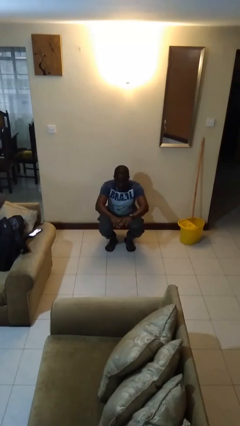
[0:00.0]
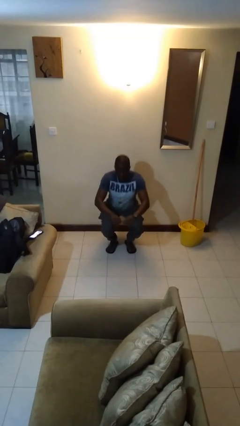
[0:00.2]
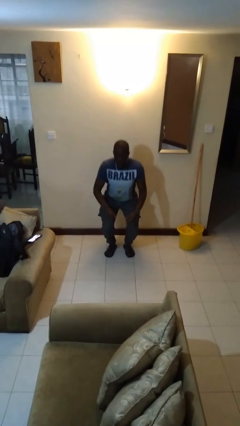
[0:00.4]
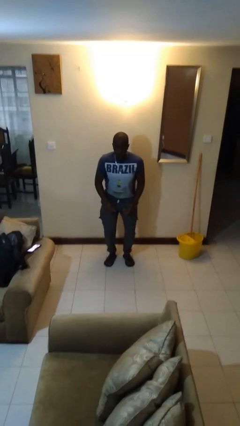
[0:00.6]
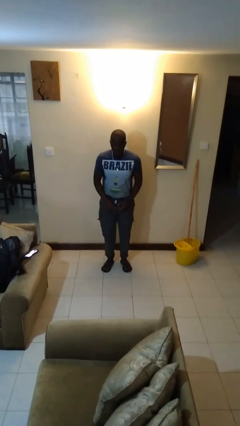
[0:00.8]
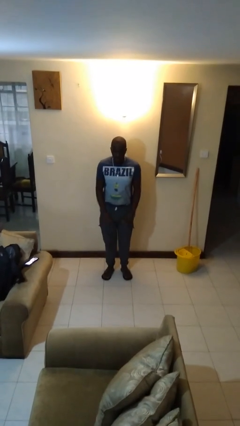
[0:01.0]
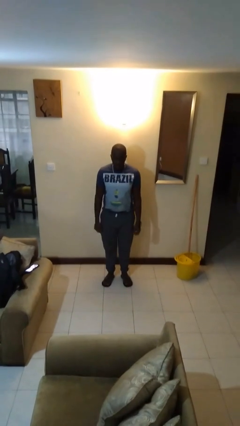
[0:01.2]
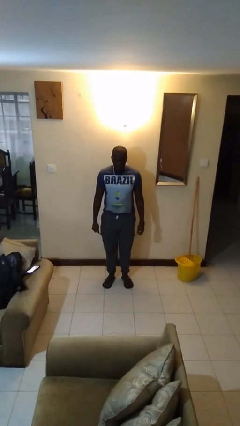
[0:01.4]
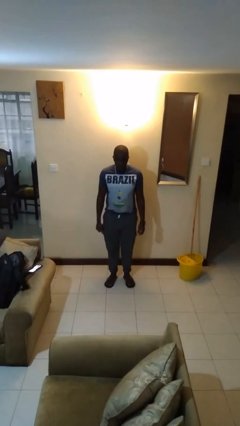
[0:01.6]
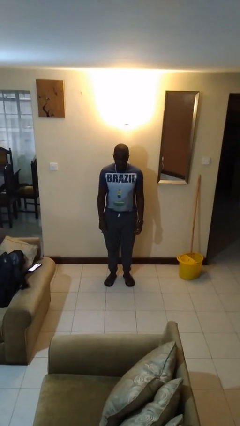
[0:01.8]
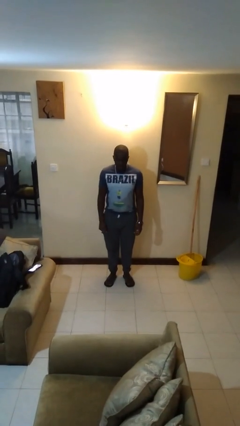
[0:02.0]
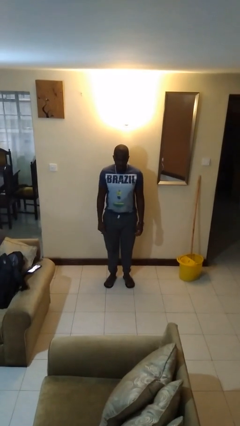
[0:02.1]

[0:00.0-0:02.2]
person stands up

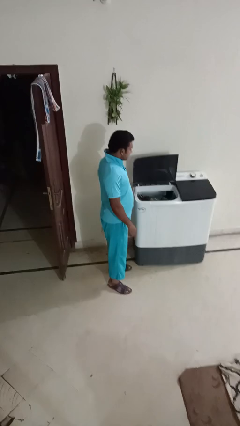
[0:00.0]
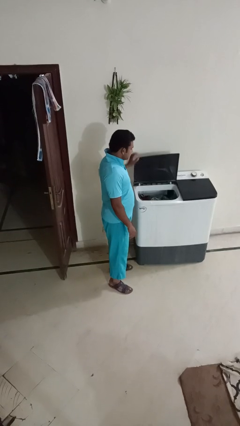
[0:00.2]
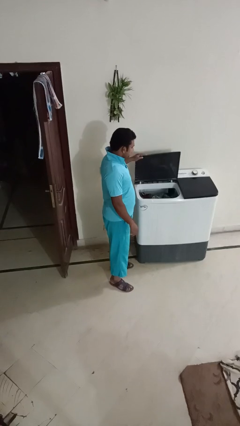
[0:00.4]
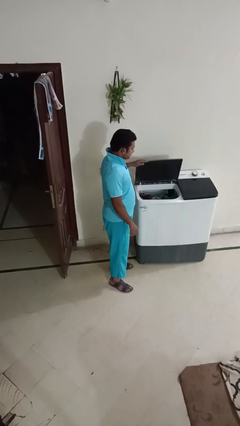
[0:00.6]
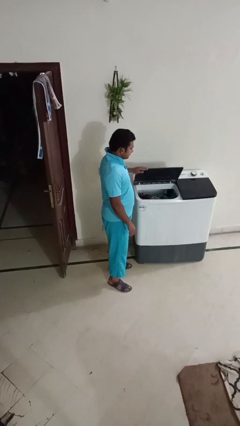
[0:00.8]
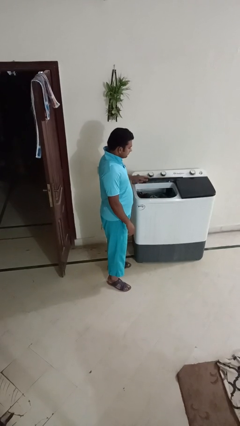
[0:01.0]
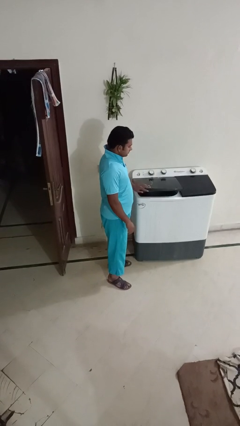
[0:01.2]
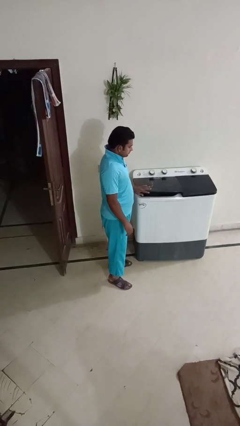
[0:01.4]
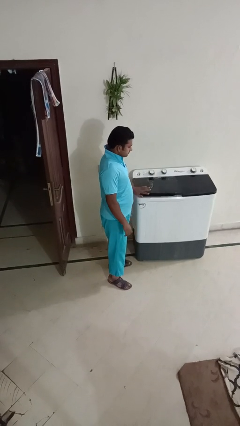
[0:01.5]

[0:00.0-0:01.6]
person closes clothes washer

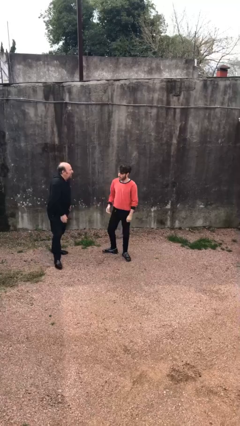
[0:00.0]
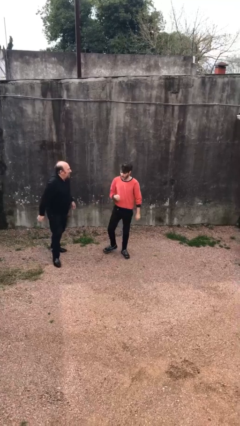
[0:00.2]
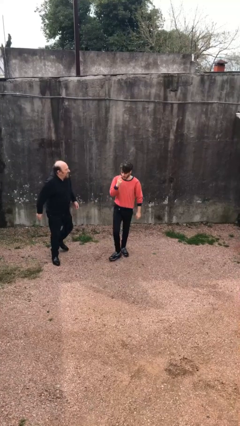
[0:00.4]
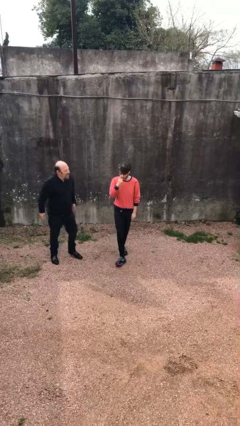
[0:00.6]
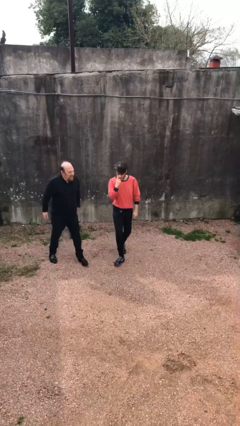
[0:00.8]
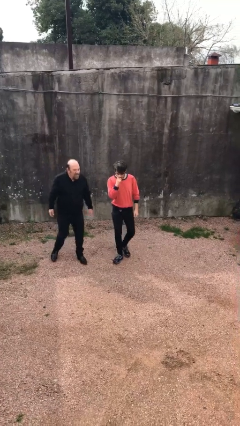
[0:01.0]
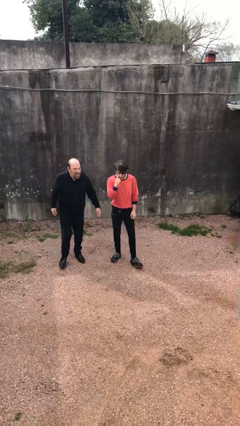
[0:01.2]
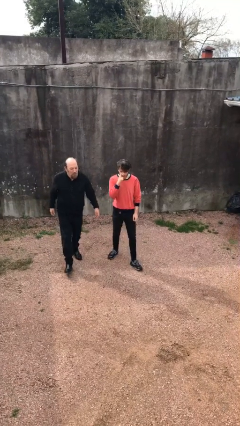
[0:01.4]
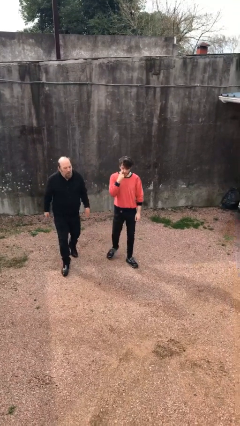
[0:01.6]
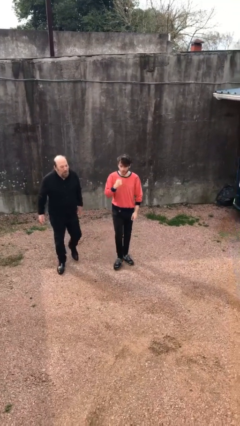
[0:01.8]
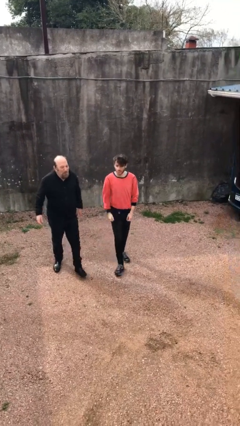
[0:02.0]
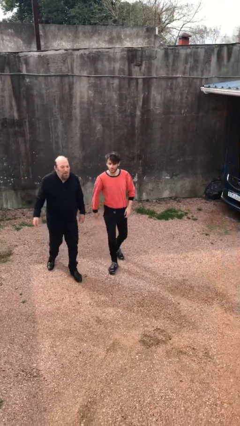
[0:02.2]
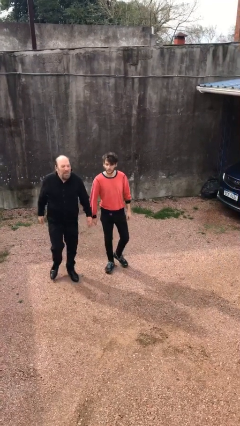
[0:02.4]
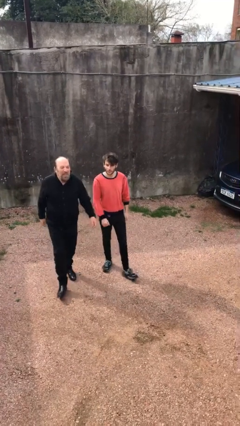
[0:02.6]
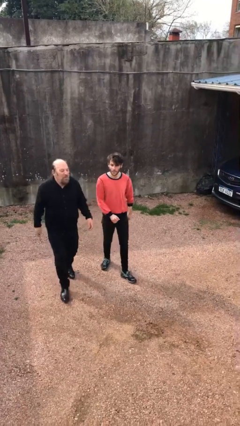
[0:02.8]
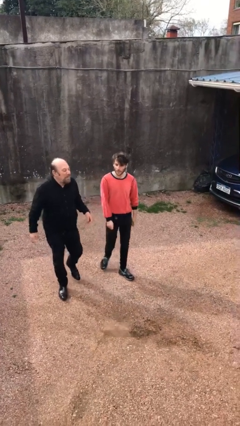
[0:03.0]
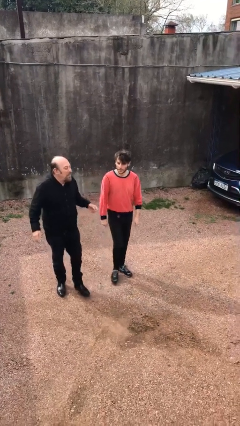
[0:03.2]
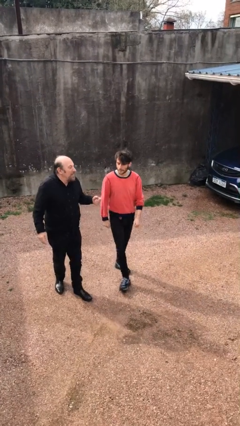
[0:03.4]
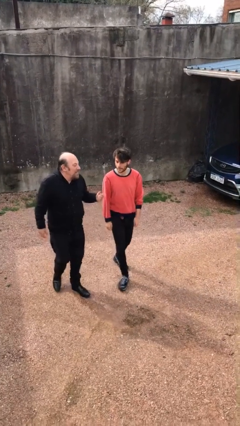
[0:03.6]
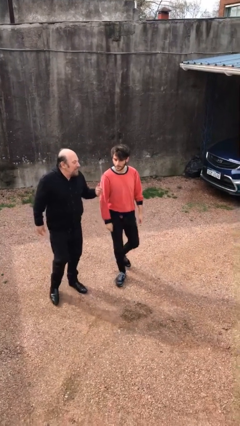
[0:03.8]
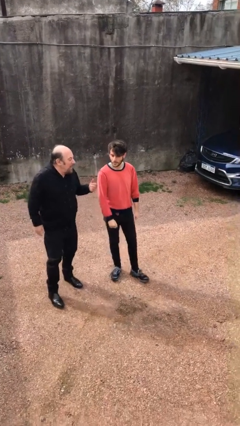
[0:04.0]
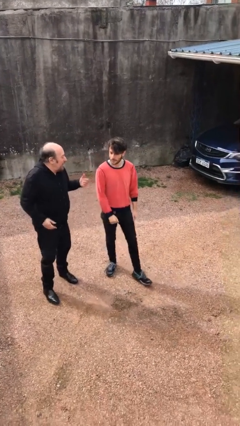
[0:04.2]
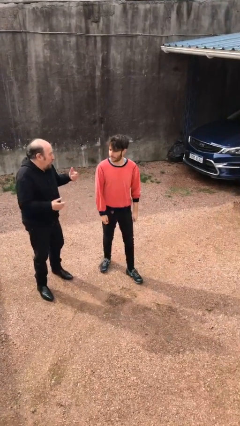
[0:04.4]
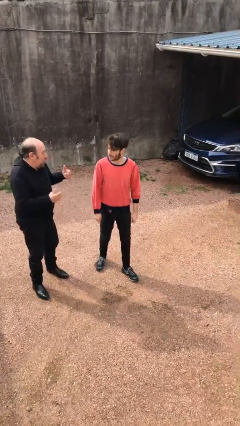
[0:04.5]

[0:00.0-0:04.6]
person talks to person

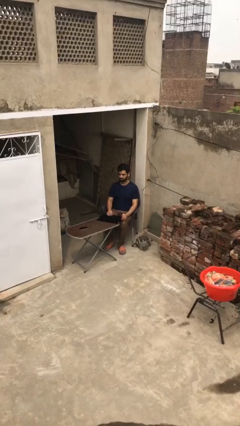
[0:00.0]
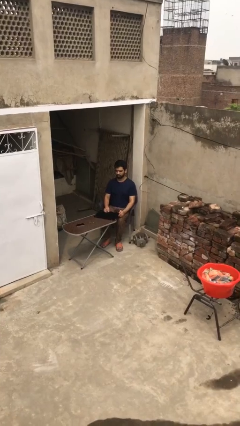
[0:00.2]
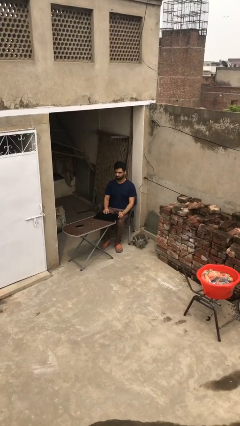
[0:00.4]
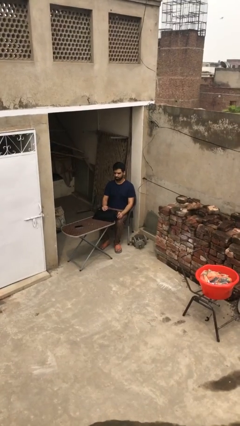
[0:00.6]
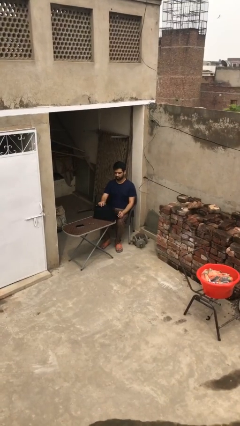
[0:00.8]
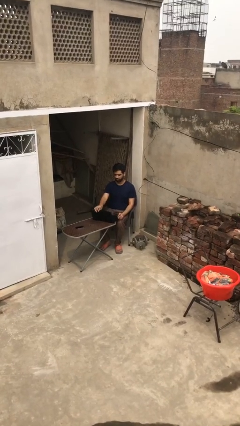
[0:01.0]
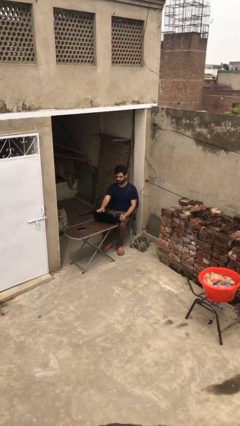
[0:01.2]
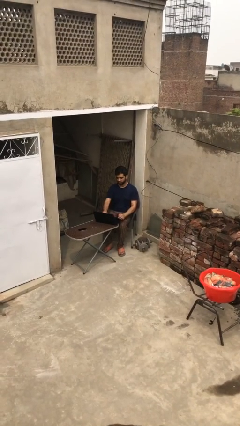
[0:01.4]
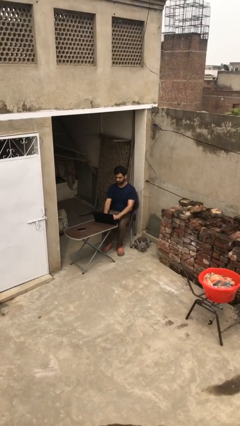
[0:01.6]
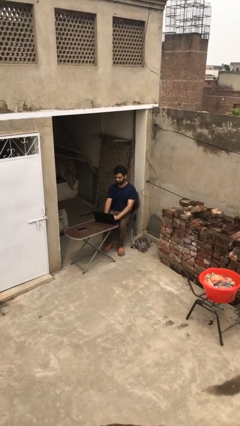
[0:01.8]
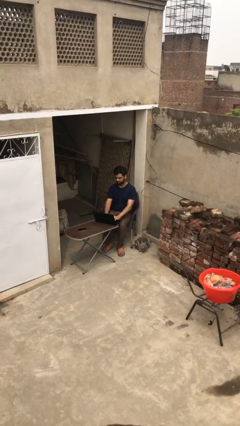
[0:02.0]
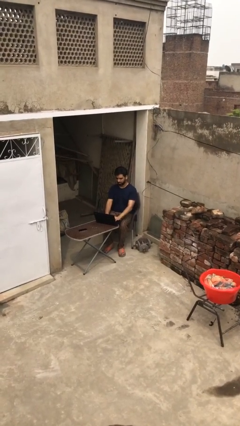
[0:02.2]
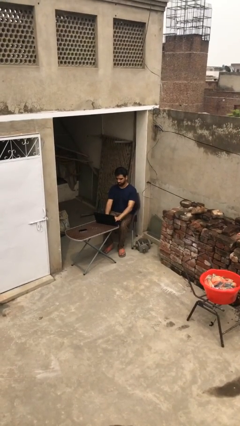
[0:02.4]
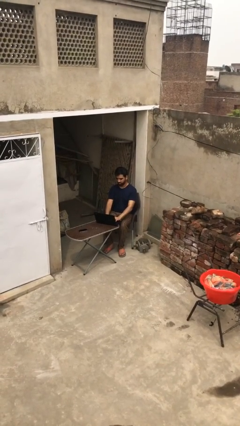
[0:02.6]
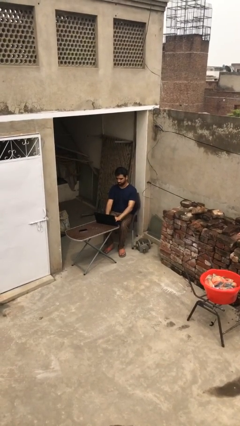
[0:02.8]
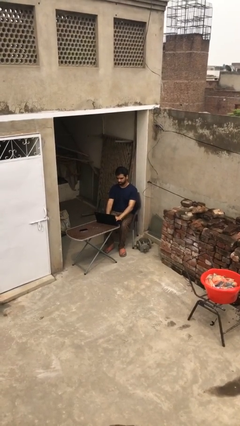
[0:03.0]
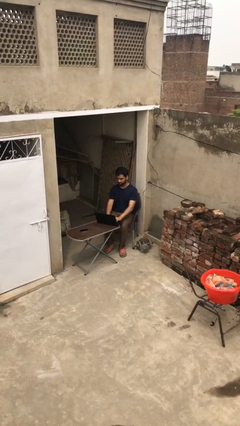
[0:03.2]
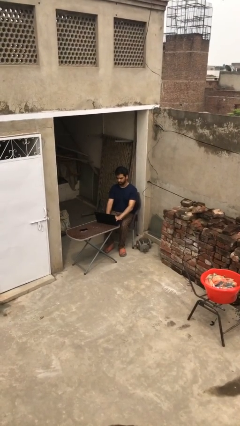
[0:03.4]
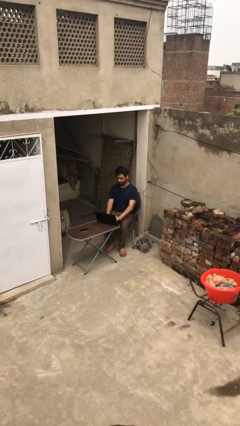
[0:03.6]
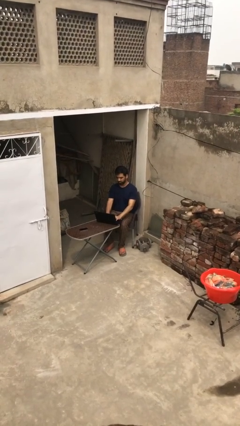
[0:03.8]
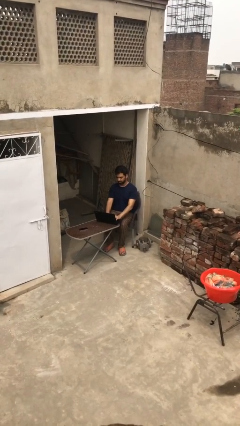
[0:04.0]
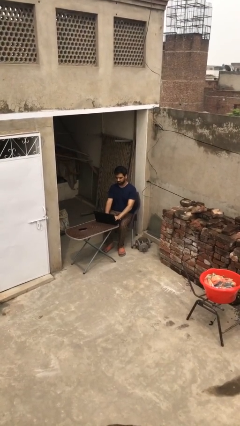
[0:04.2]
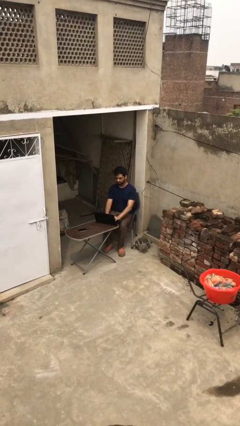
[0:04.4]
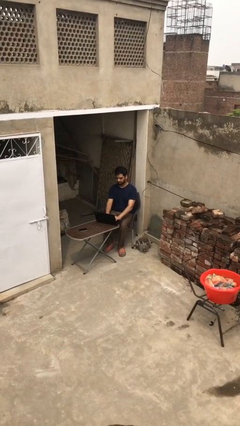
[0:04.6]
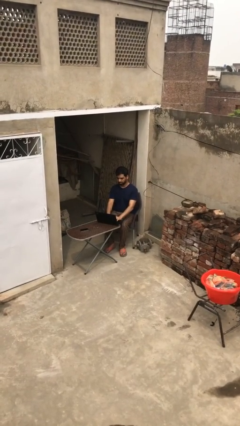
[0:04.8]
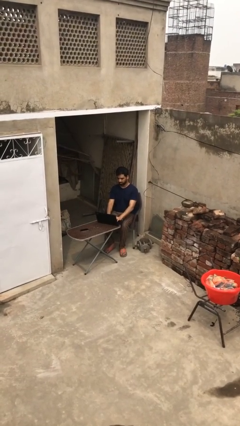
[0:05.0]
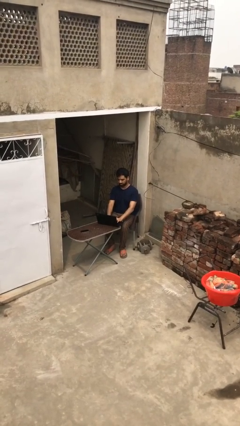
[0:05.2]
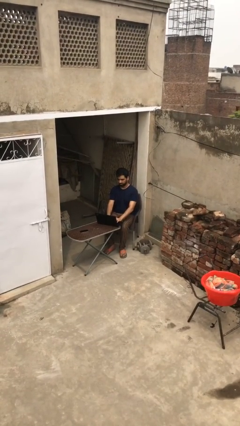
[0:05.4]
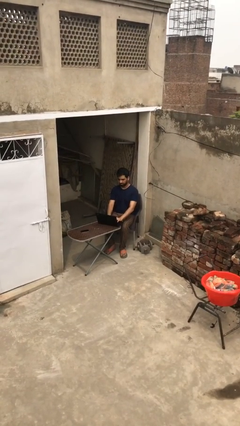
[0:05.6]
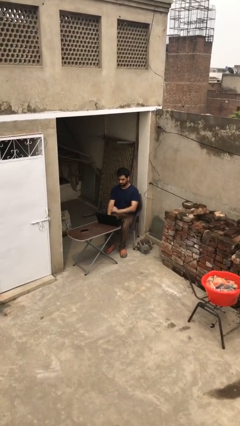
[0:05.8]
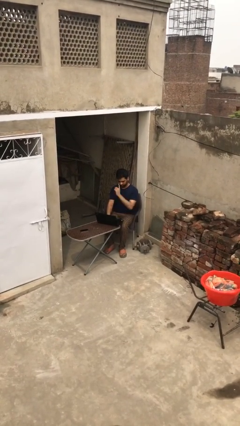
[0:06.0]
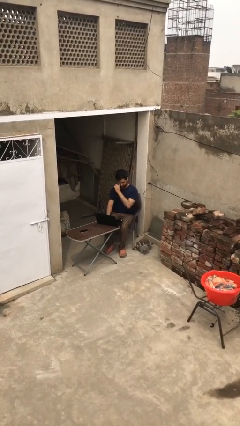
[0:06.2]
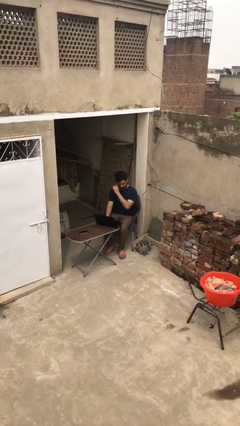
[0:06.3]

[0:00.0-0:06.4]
person interacts with laptop

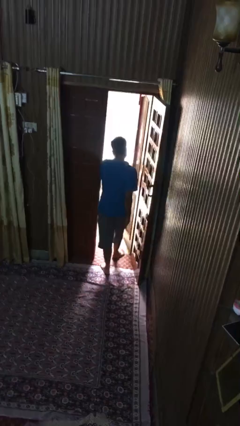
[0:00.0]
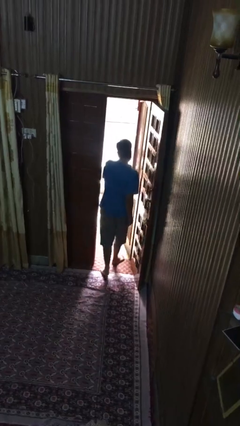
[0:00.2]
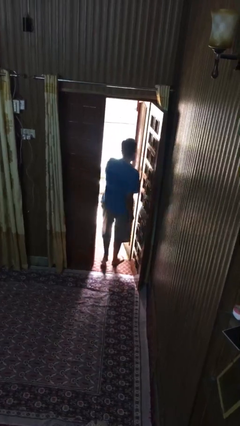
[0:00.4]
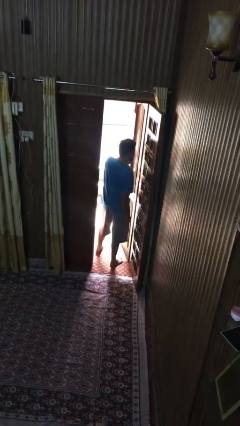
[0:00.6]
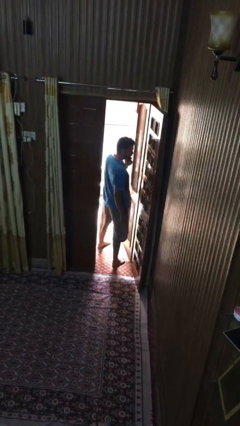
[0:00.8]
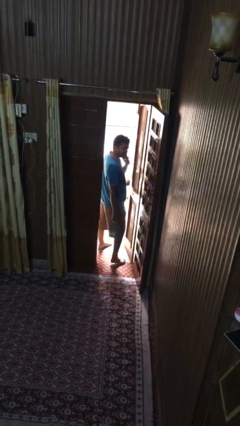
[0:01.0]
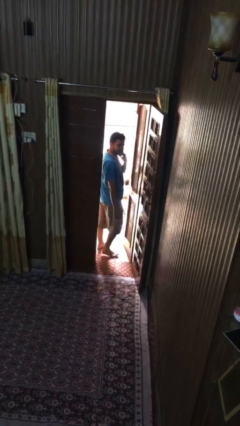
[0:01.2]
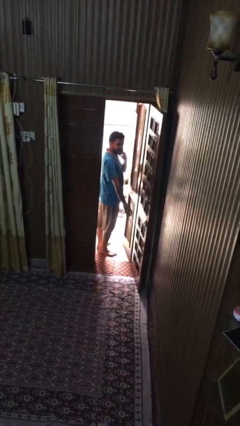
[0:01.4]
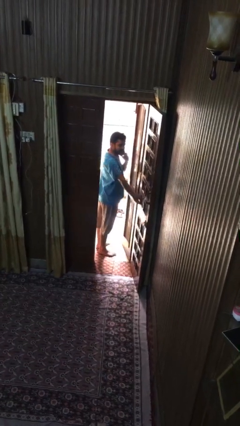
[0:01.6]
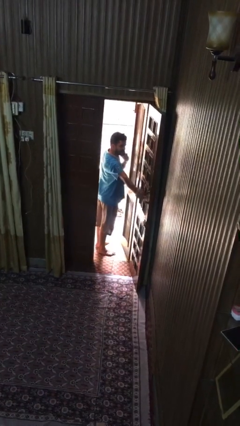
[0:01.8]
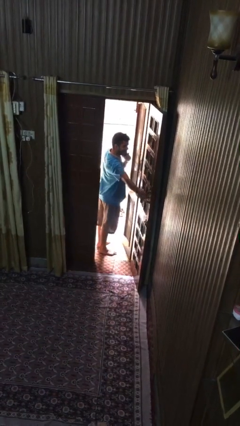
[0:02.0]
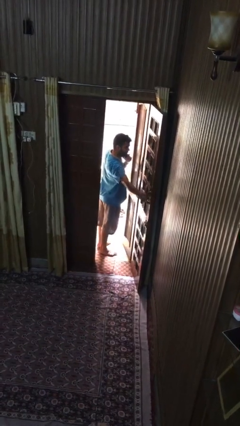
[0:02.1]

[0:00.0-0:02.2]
person exits scene through structure

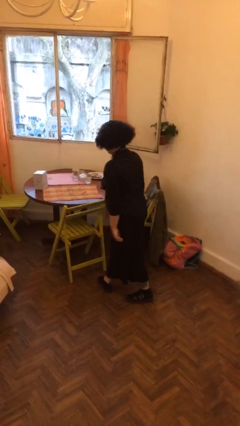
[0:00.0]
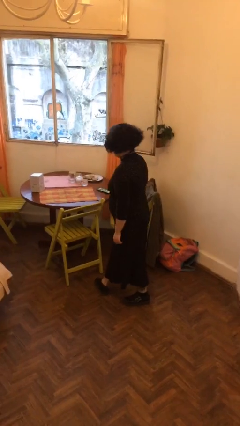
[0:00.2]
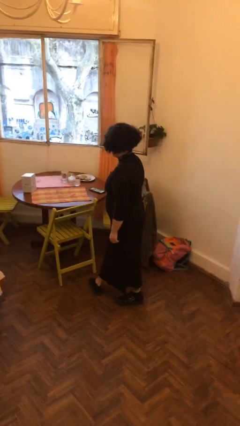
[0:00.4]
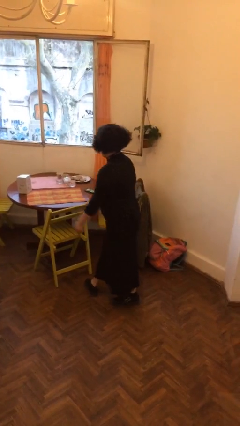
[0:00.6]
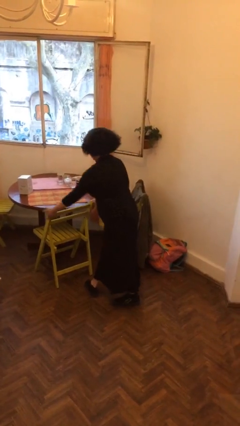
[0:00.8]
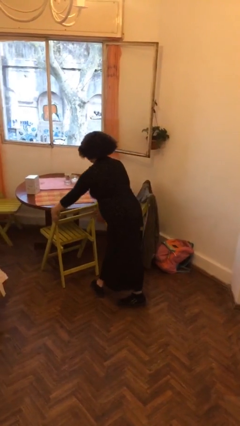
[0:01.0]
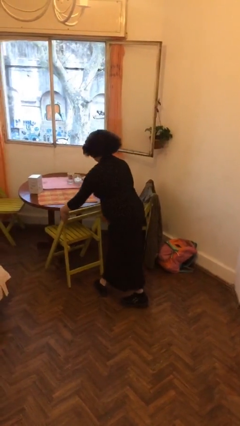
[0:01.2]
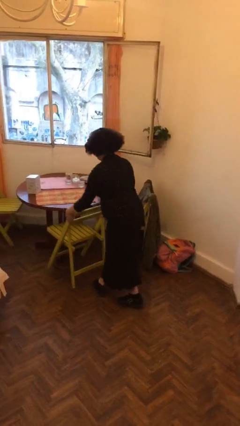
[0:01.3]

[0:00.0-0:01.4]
person pulls out chair
